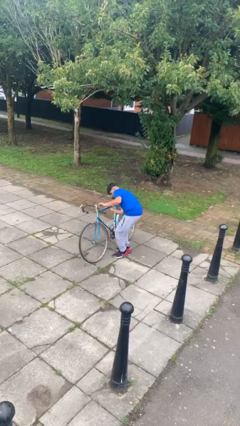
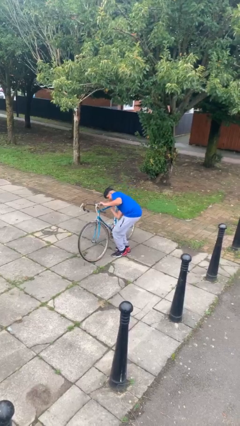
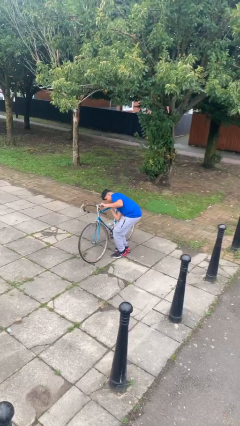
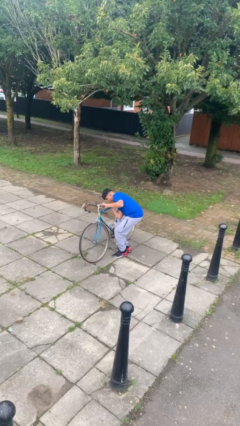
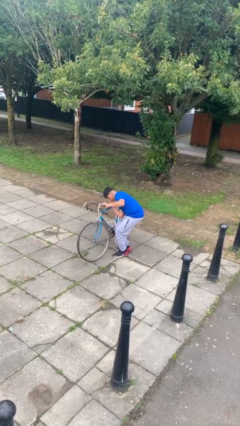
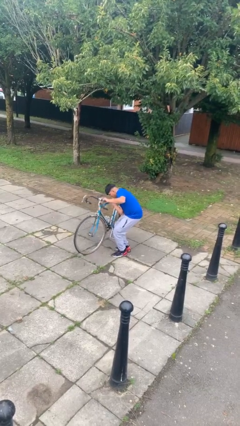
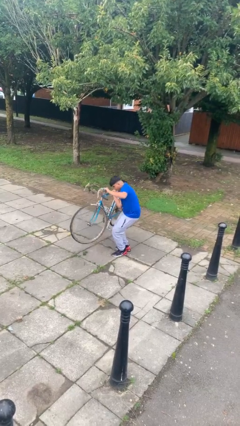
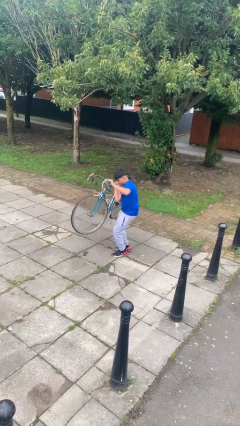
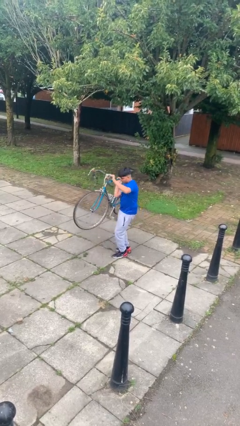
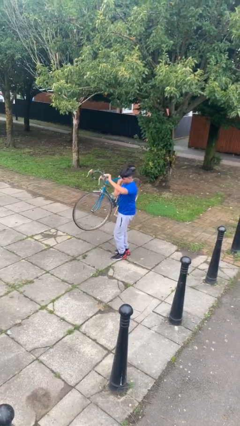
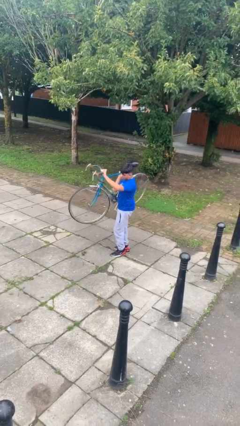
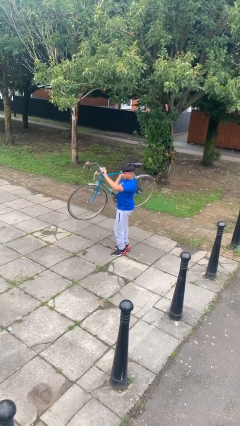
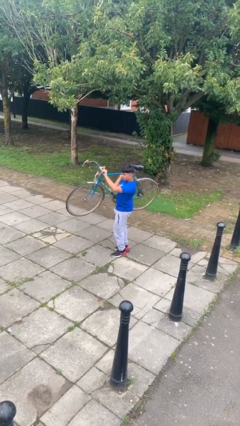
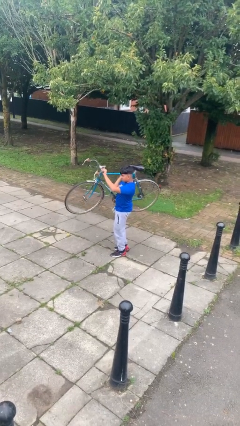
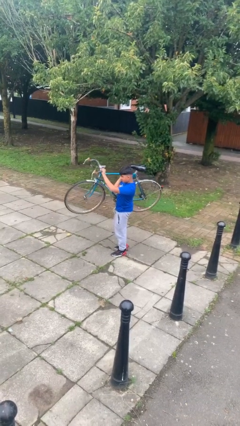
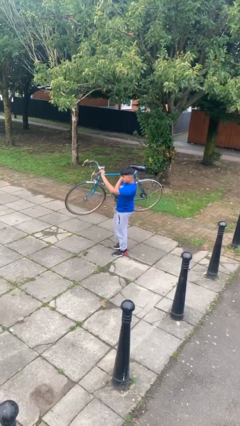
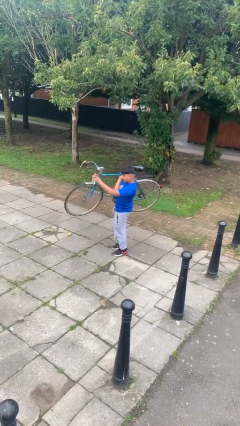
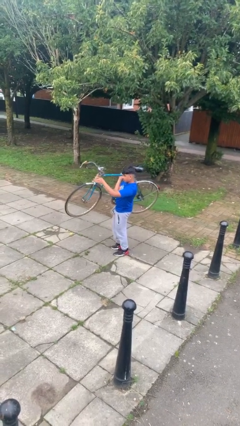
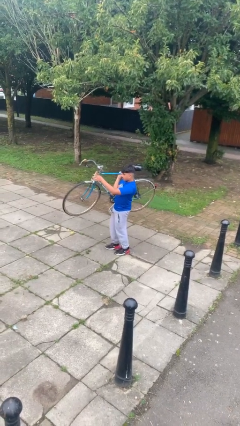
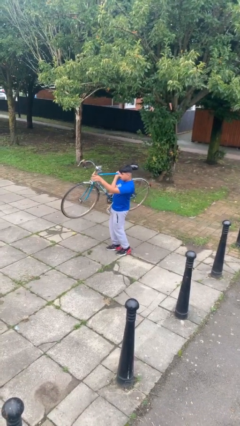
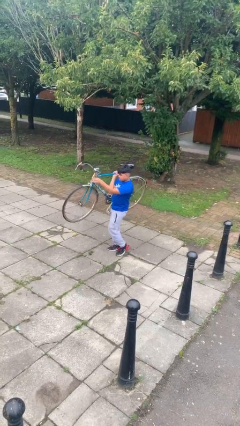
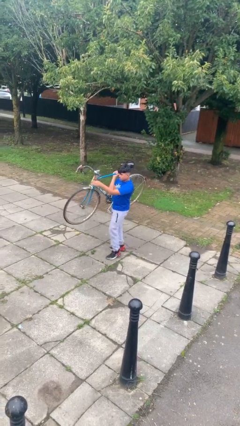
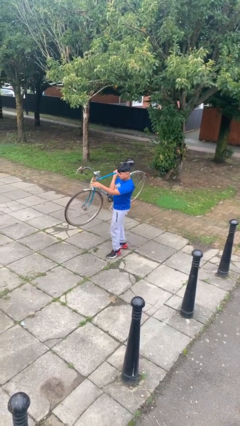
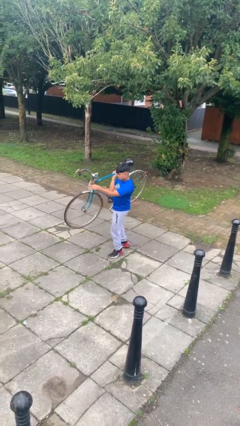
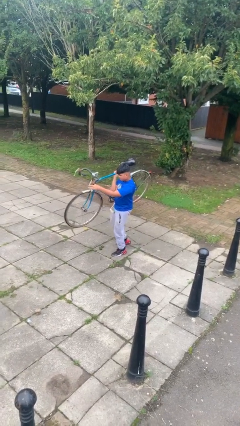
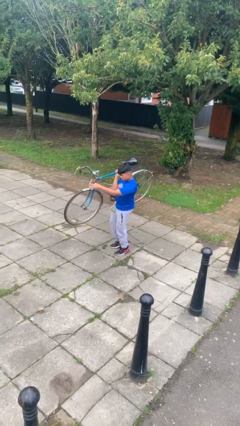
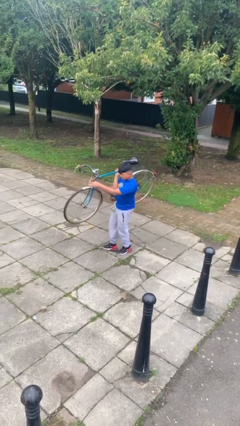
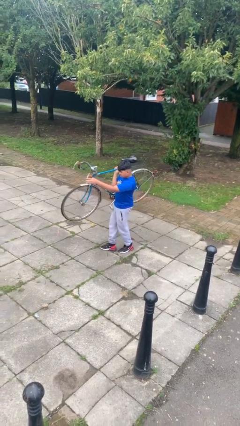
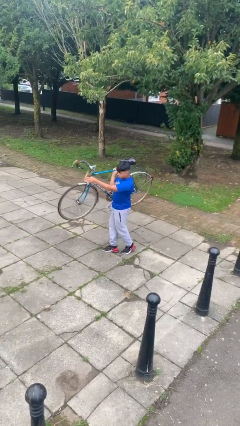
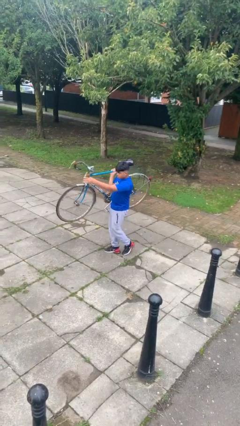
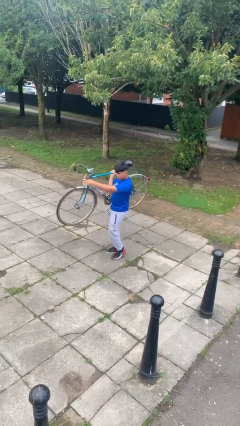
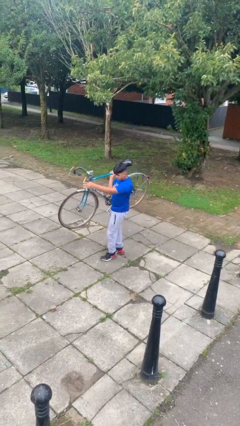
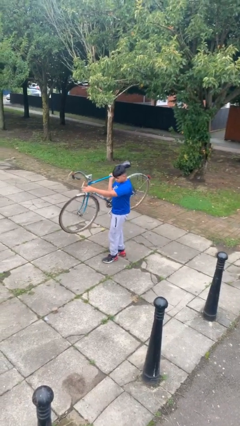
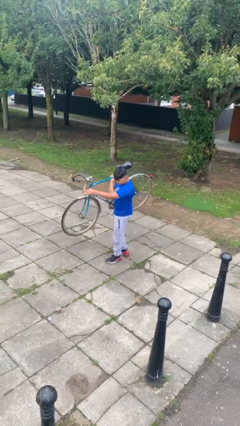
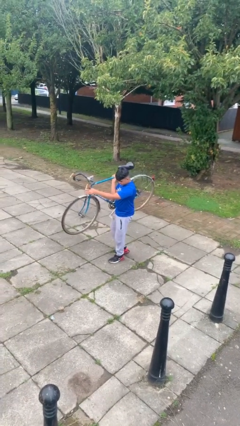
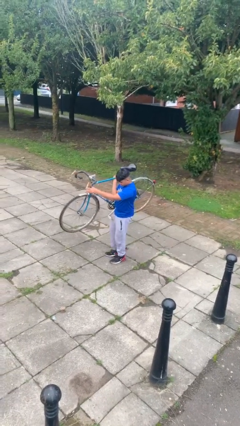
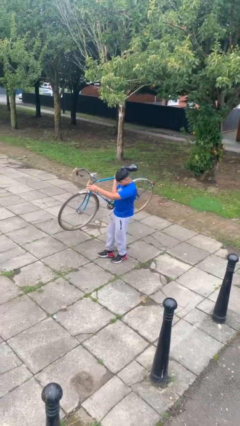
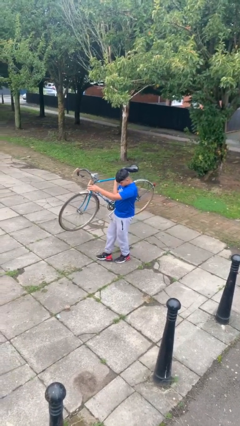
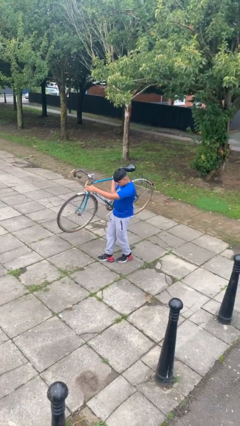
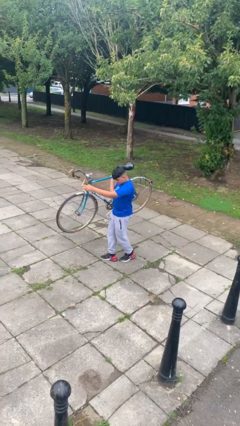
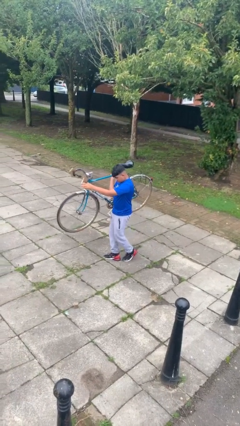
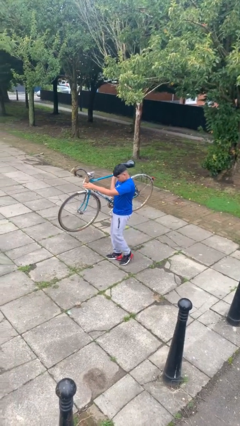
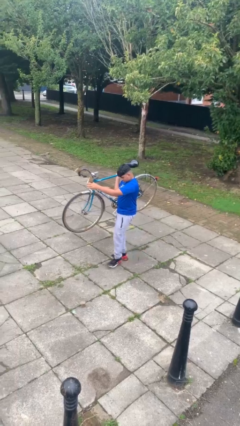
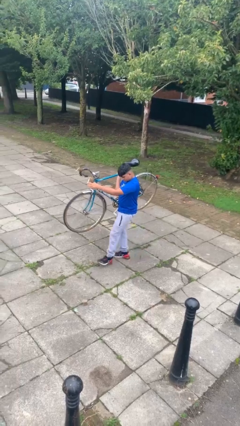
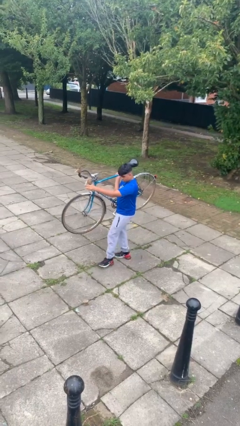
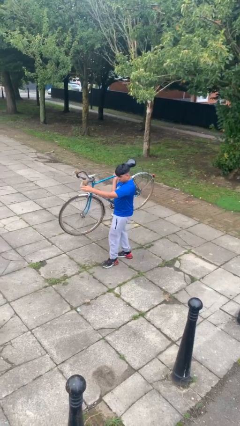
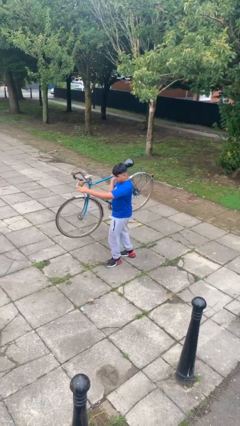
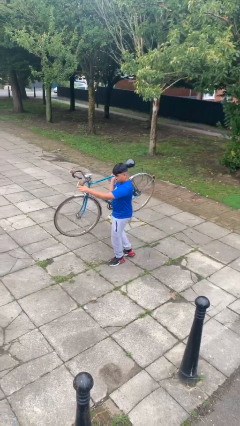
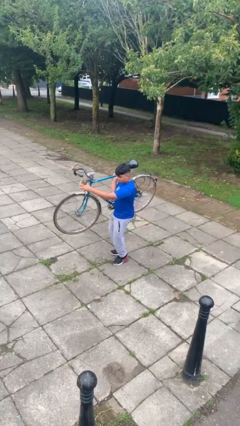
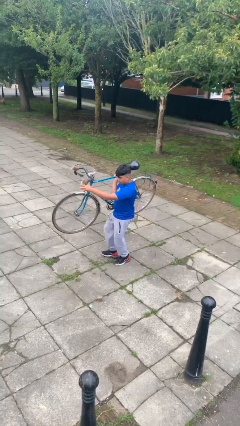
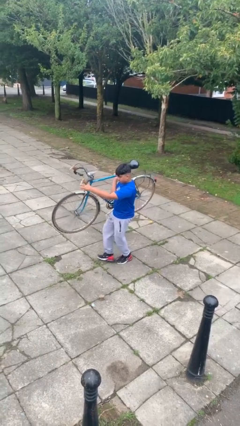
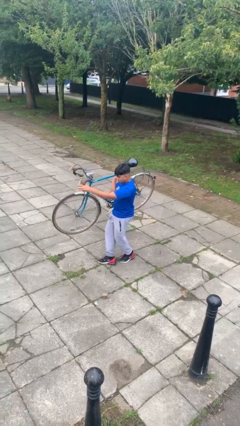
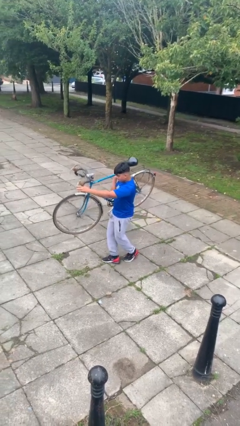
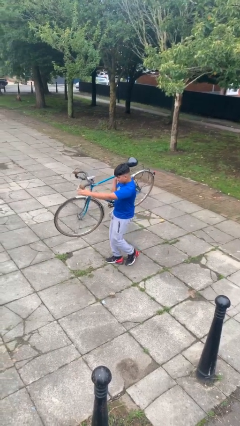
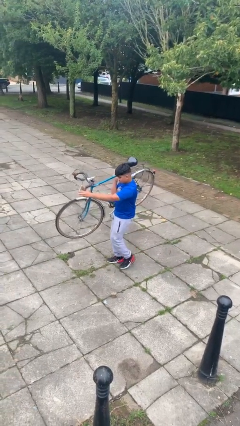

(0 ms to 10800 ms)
person carries heavy object

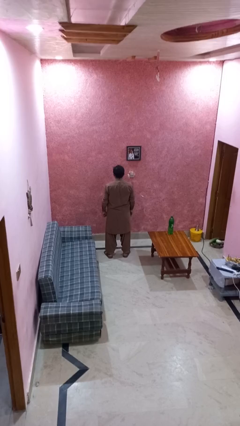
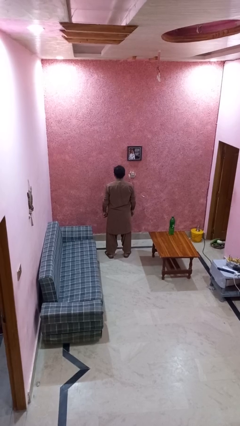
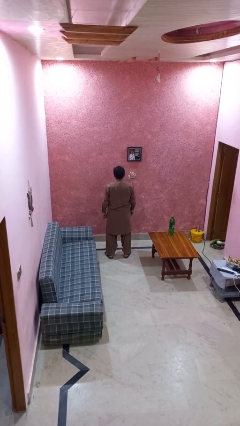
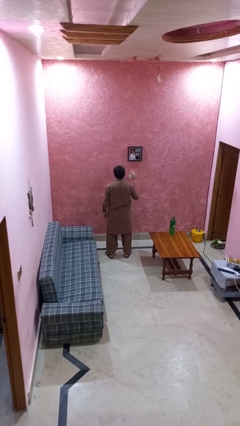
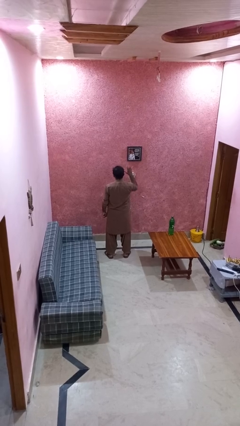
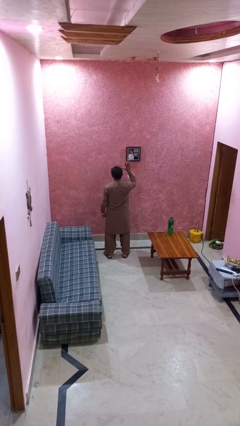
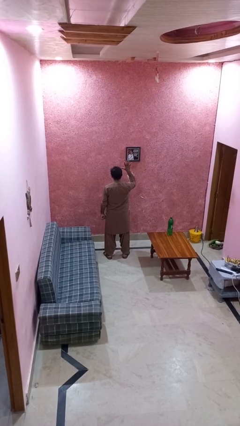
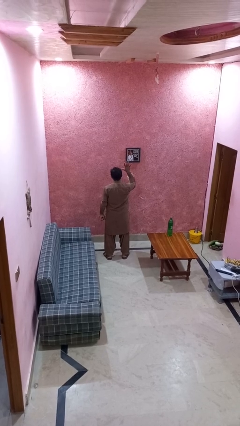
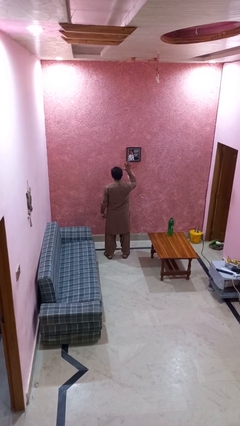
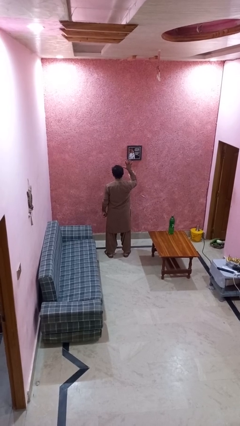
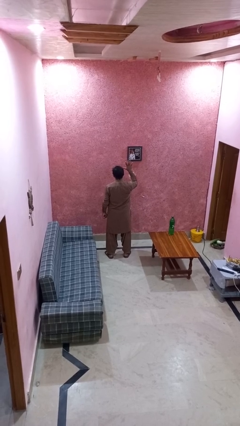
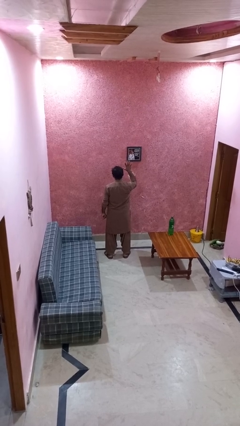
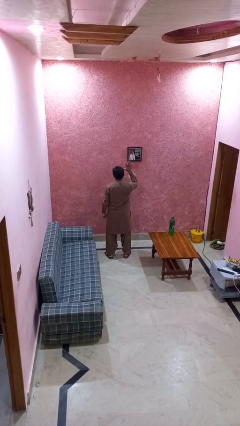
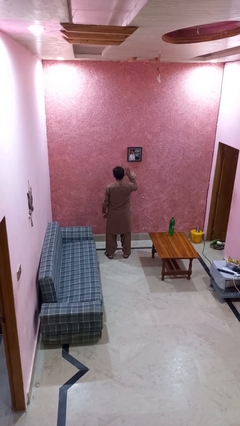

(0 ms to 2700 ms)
person gestures number five

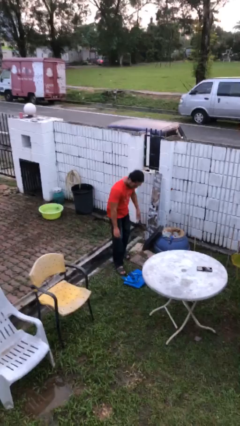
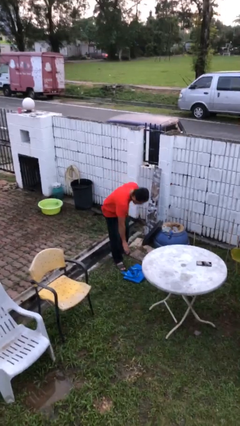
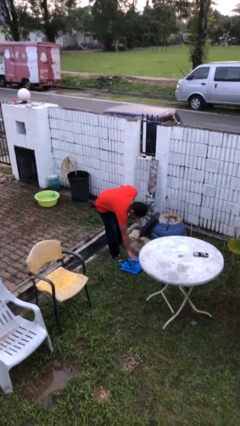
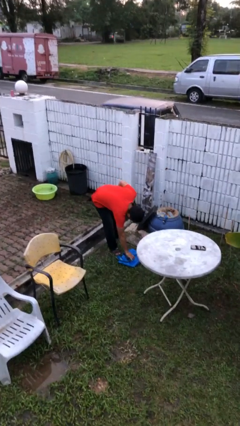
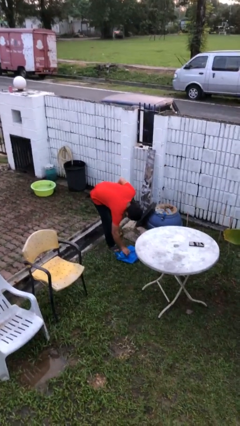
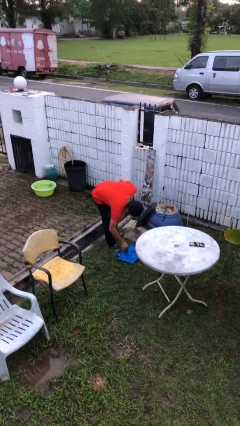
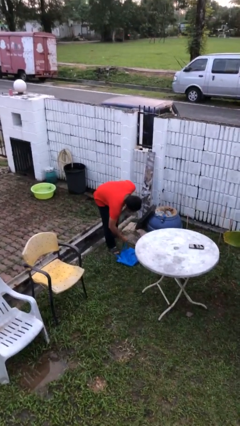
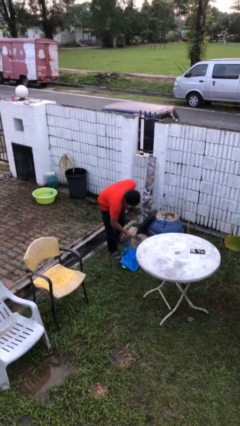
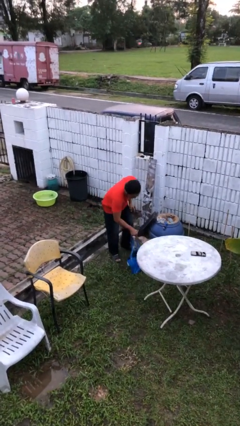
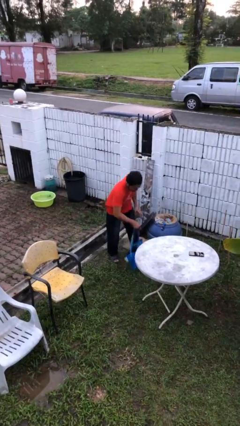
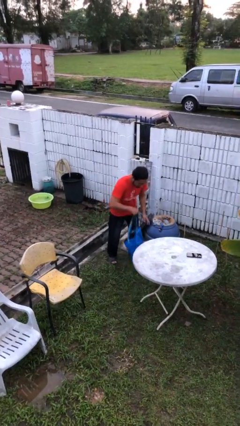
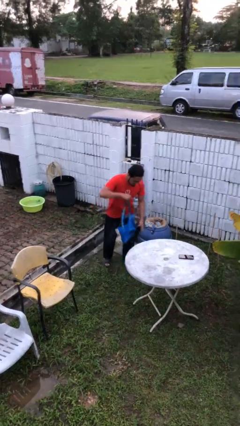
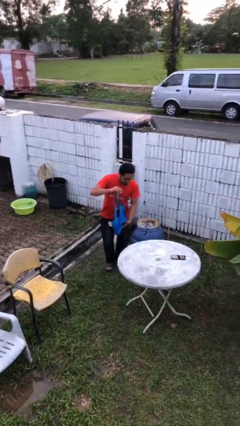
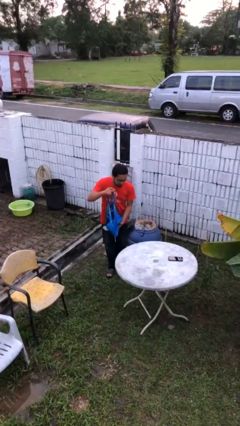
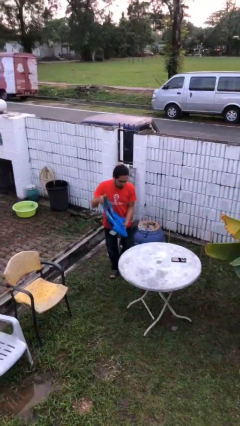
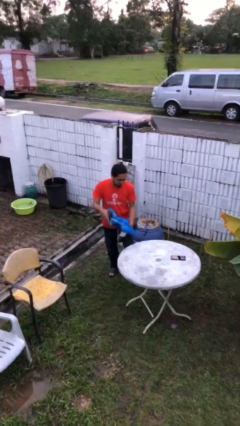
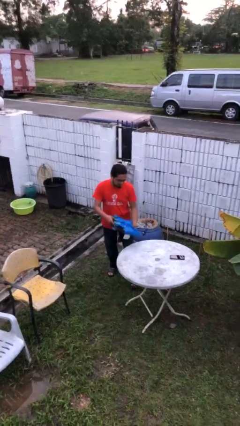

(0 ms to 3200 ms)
person picks up object from floor

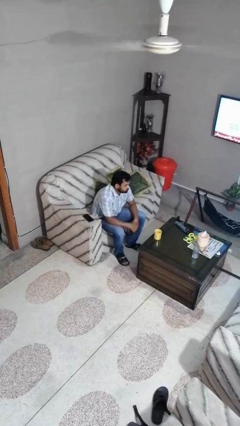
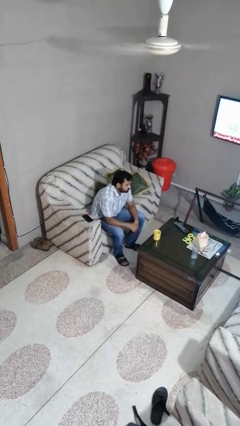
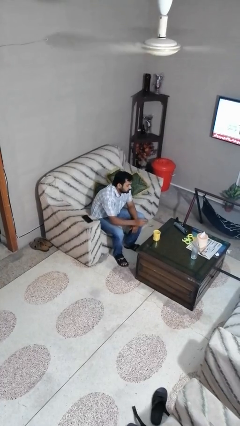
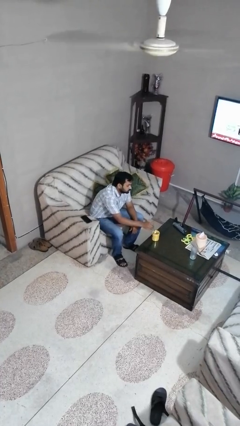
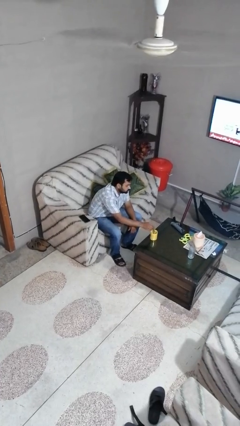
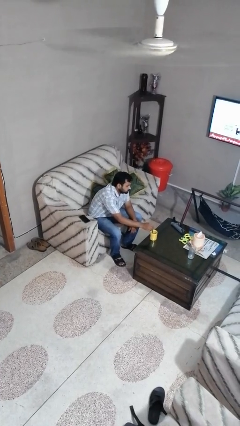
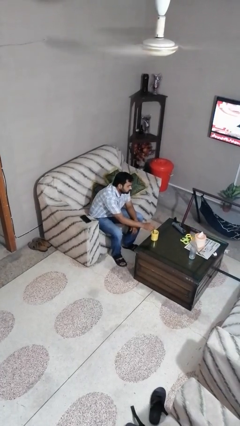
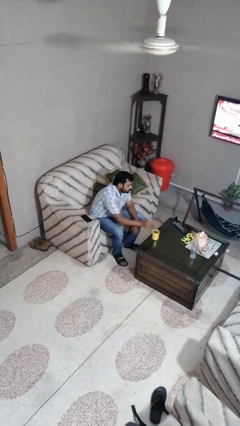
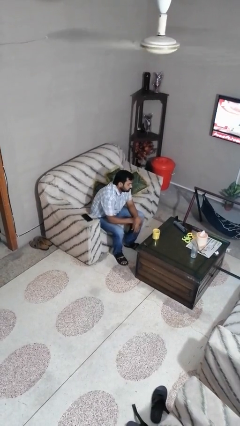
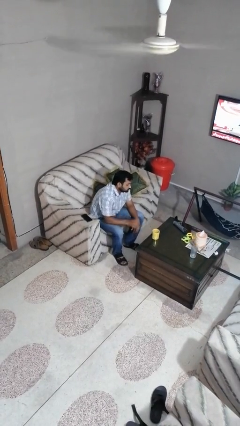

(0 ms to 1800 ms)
person stirs mug
